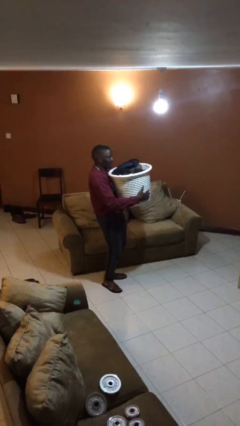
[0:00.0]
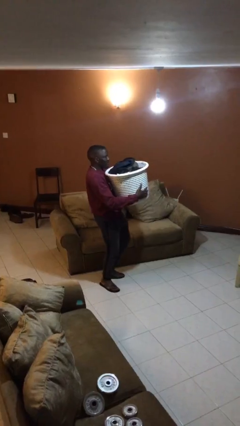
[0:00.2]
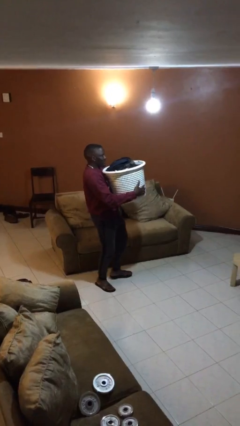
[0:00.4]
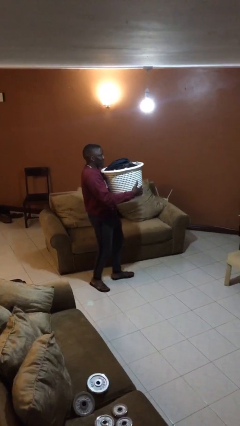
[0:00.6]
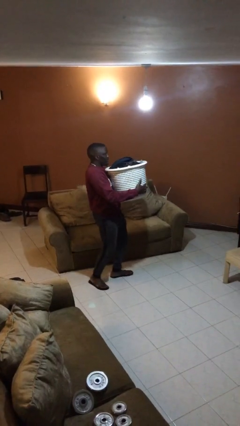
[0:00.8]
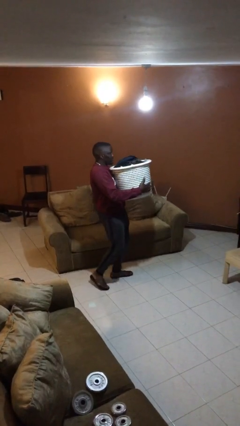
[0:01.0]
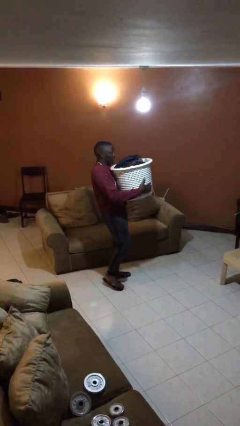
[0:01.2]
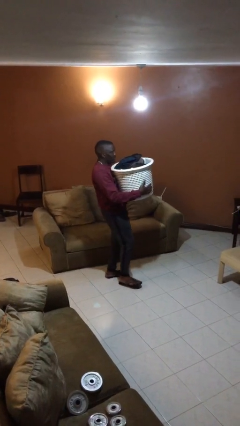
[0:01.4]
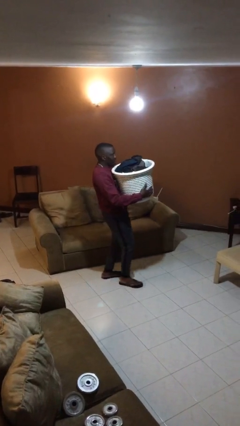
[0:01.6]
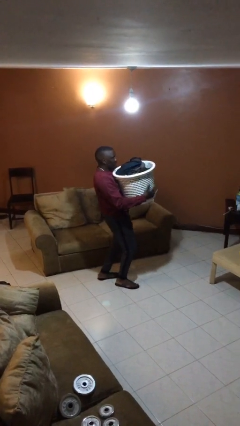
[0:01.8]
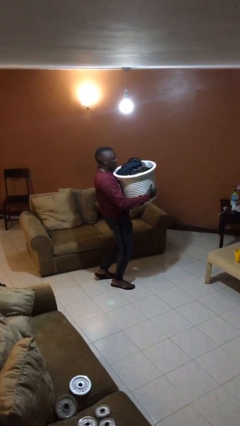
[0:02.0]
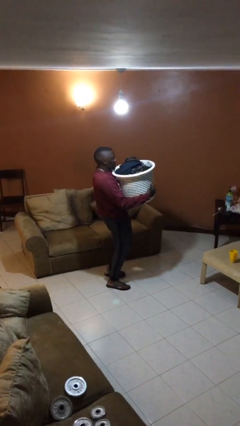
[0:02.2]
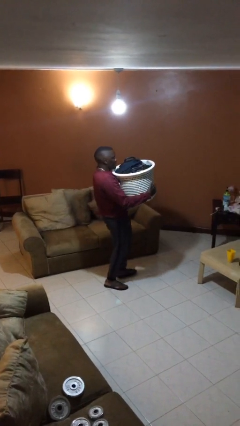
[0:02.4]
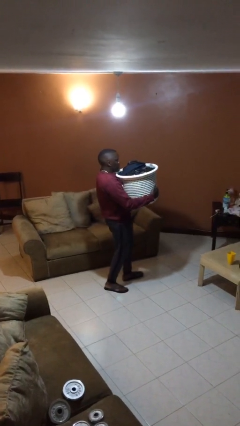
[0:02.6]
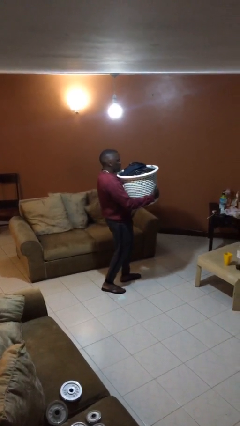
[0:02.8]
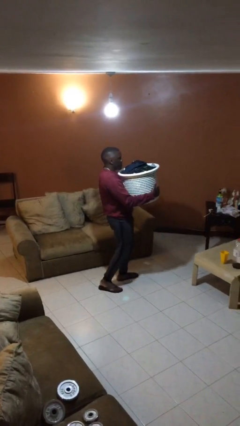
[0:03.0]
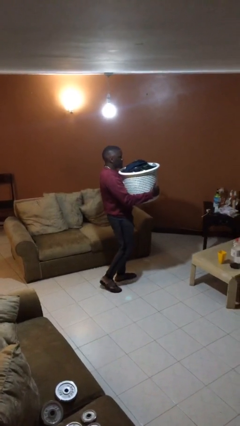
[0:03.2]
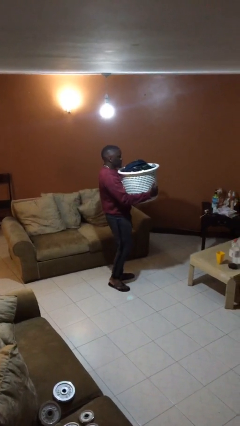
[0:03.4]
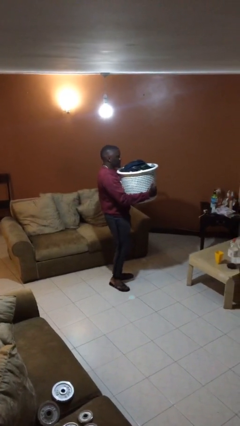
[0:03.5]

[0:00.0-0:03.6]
person carries laundry basket

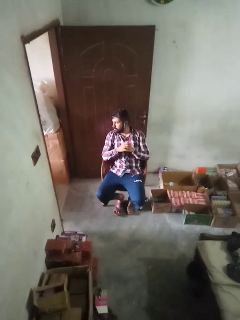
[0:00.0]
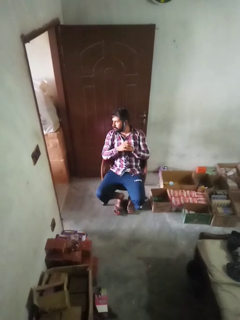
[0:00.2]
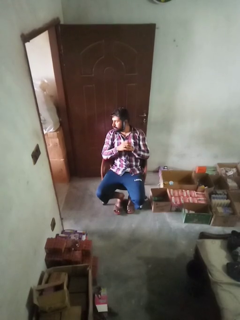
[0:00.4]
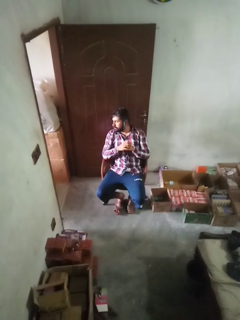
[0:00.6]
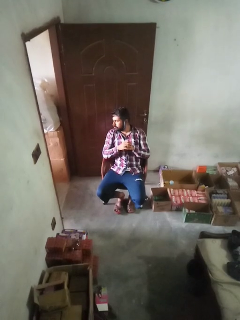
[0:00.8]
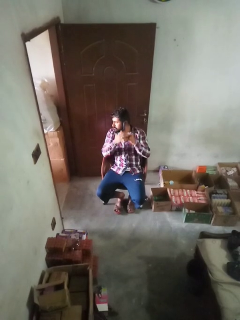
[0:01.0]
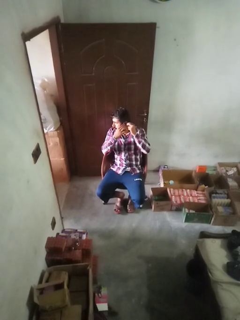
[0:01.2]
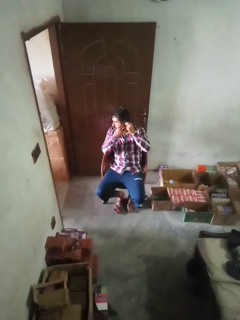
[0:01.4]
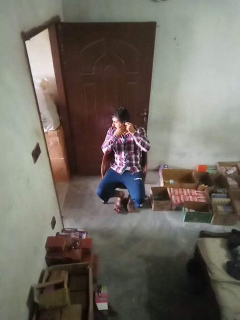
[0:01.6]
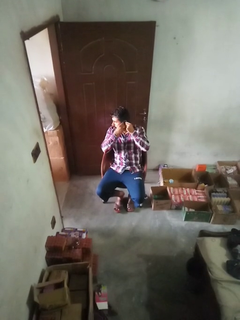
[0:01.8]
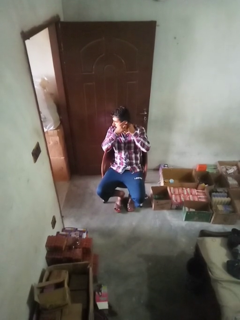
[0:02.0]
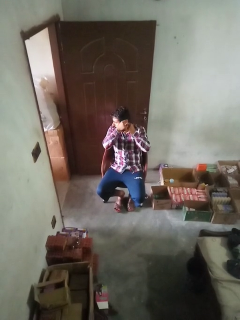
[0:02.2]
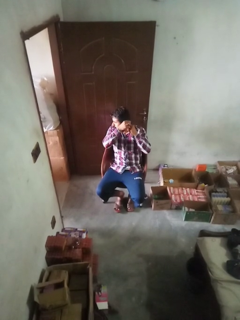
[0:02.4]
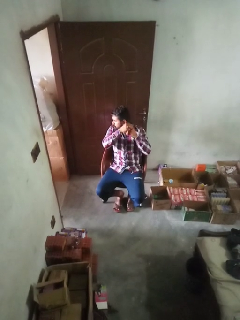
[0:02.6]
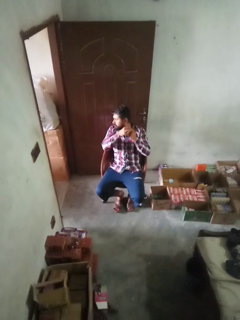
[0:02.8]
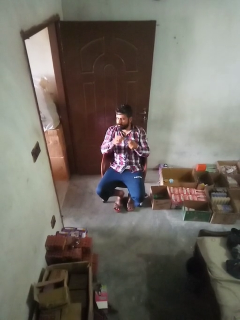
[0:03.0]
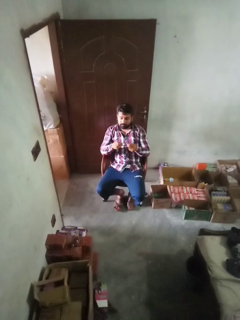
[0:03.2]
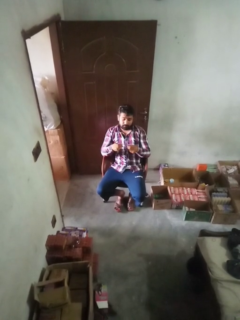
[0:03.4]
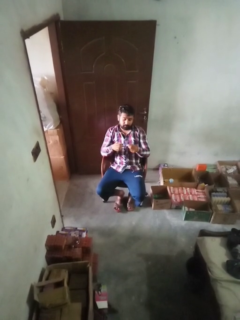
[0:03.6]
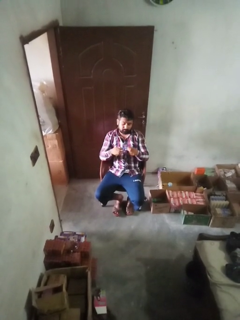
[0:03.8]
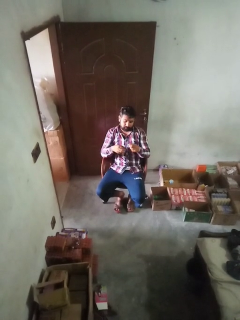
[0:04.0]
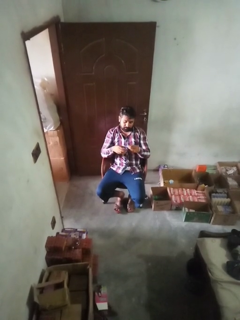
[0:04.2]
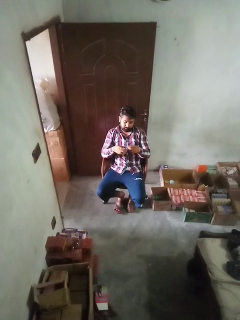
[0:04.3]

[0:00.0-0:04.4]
person takes off earrings

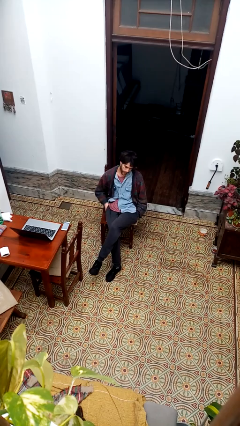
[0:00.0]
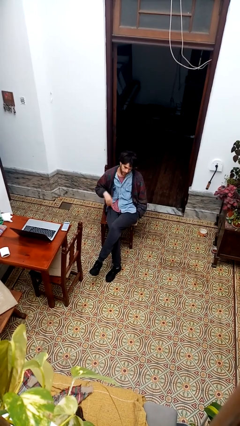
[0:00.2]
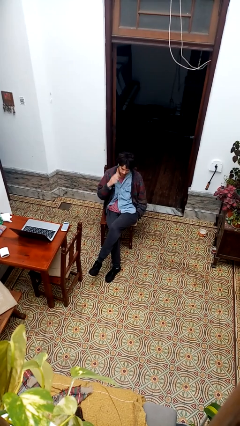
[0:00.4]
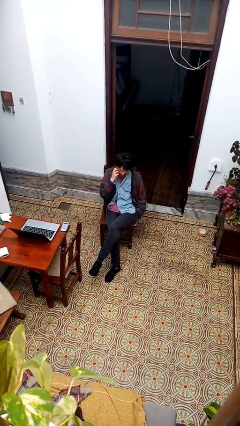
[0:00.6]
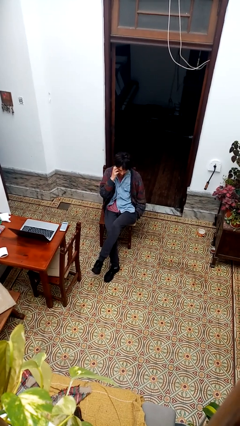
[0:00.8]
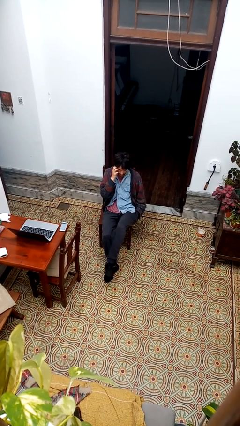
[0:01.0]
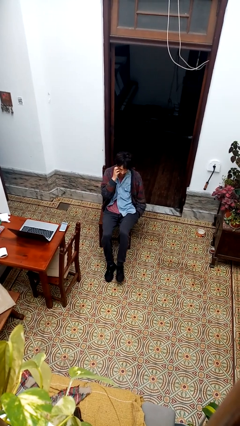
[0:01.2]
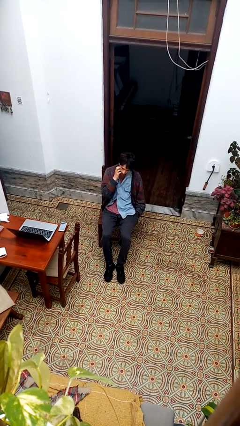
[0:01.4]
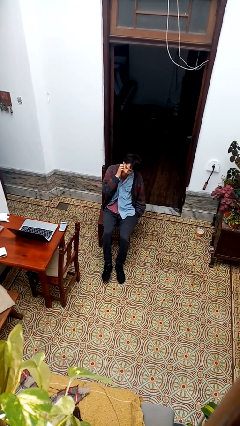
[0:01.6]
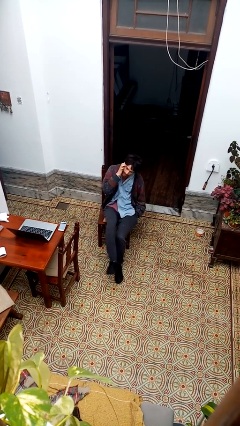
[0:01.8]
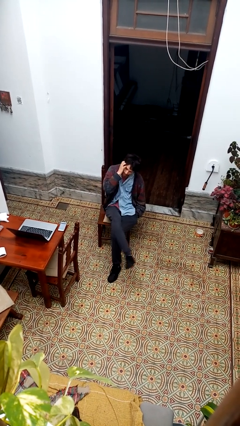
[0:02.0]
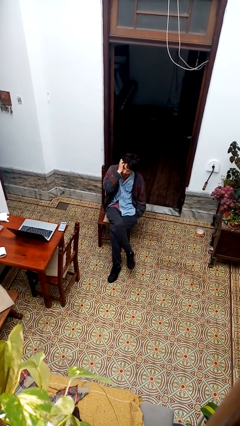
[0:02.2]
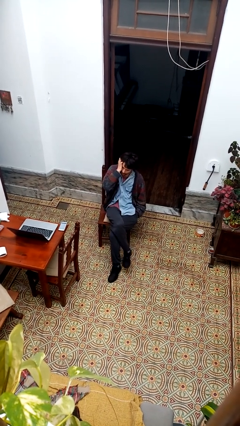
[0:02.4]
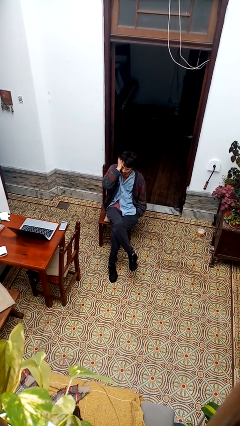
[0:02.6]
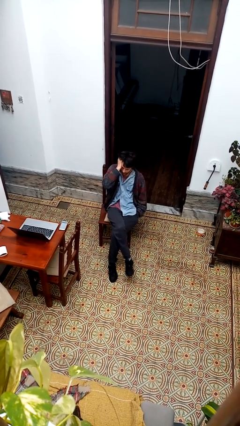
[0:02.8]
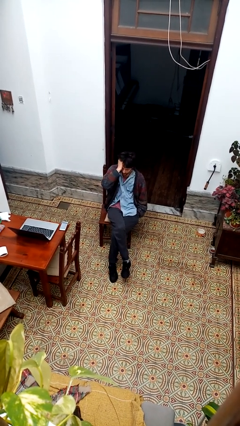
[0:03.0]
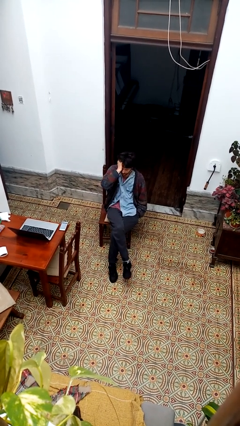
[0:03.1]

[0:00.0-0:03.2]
person crosses legs

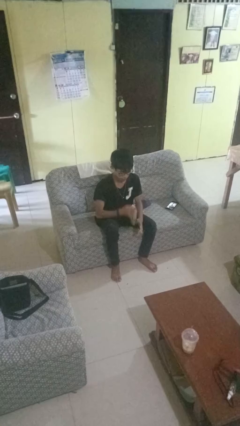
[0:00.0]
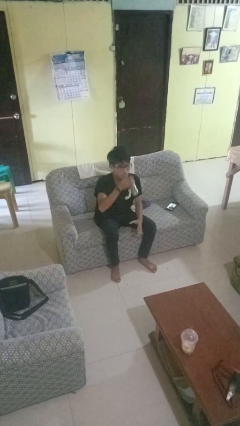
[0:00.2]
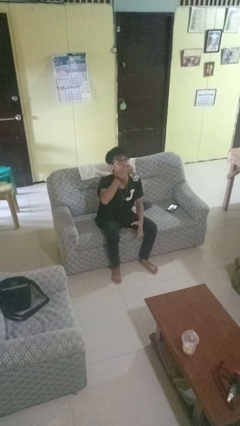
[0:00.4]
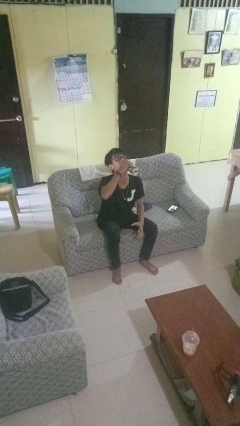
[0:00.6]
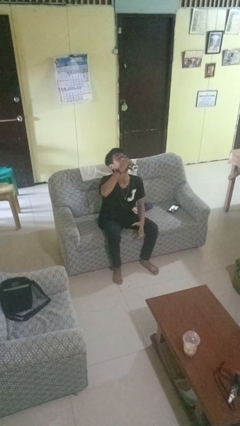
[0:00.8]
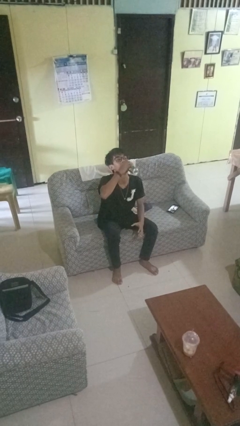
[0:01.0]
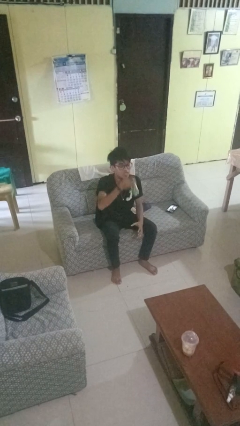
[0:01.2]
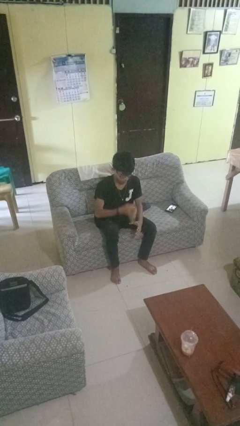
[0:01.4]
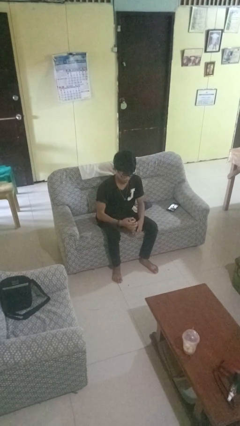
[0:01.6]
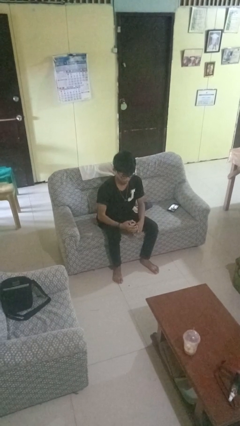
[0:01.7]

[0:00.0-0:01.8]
person drinks from beverage can

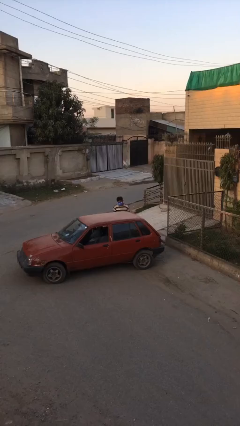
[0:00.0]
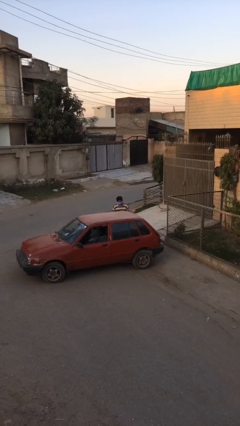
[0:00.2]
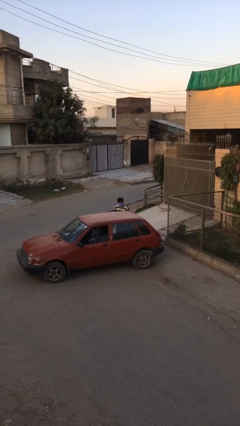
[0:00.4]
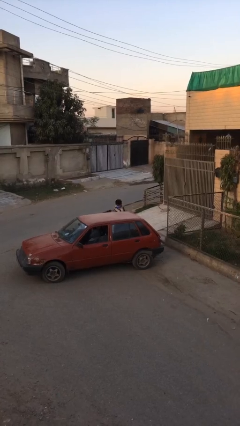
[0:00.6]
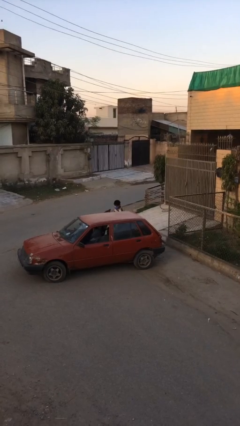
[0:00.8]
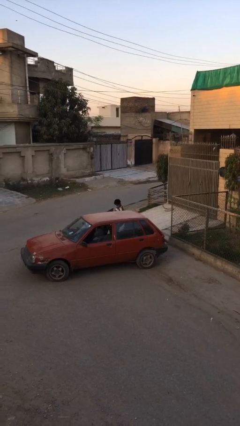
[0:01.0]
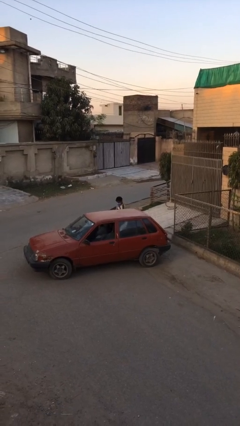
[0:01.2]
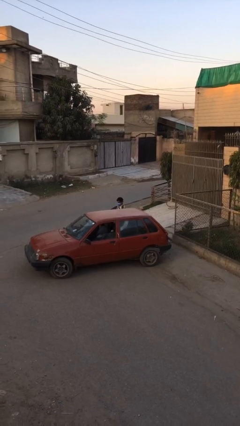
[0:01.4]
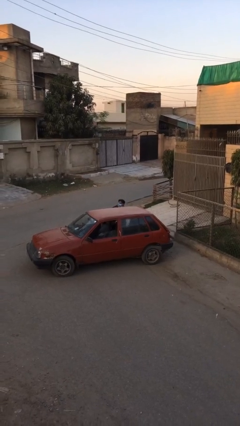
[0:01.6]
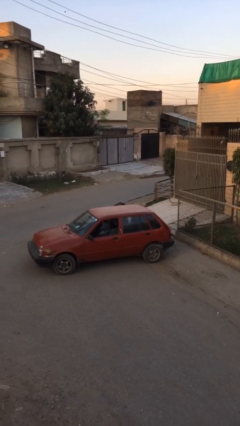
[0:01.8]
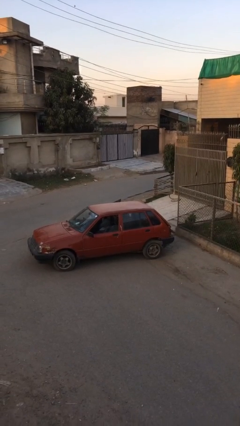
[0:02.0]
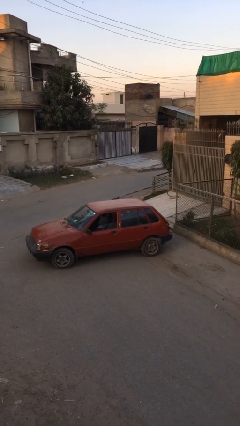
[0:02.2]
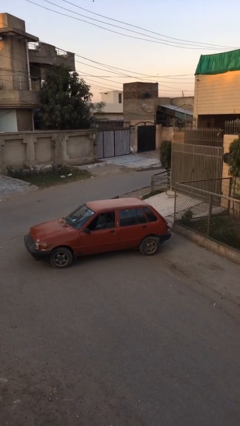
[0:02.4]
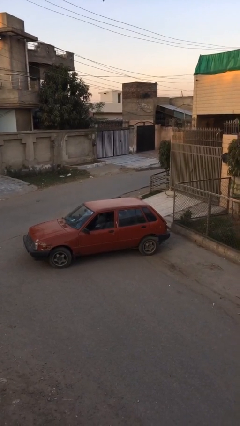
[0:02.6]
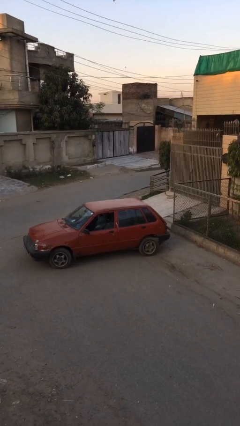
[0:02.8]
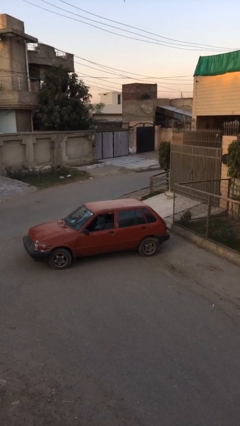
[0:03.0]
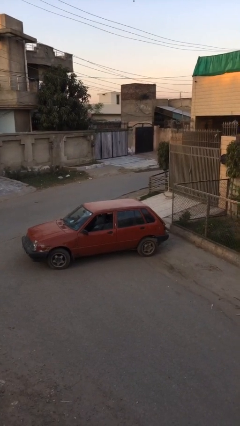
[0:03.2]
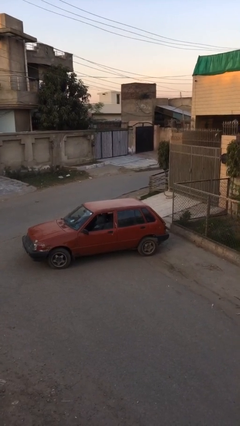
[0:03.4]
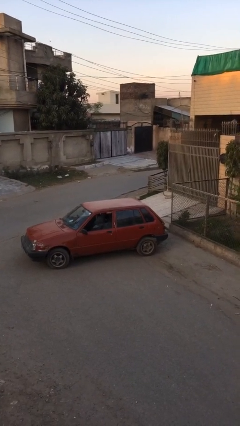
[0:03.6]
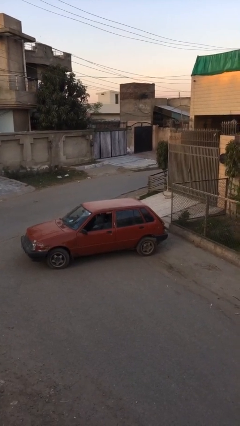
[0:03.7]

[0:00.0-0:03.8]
person enters car

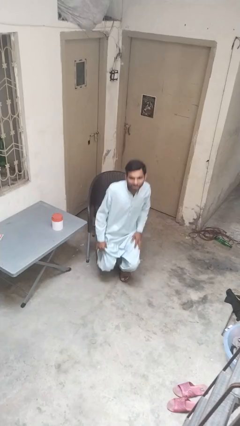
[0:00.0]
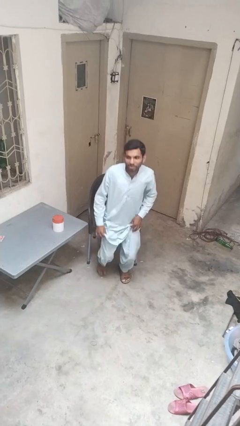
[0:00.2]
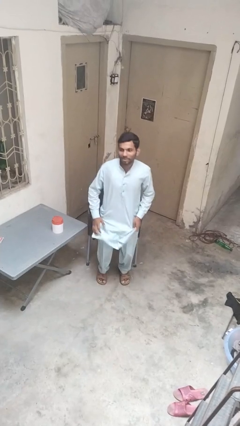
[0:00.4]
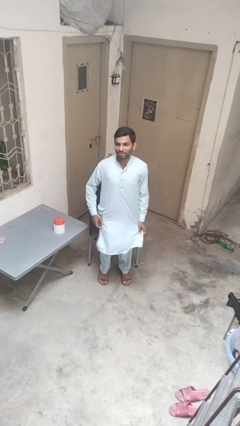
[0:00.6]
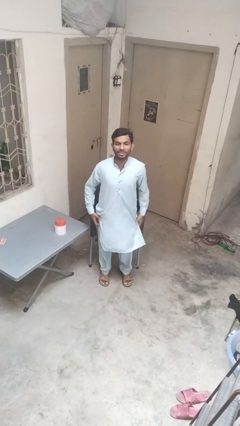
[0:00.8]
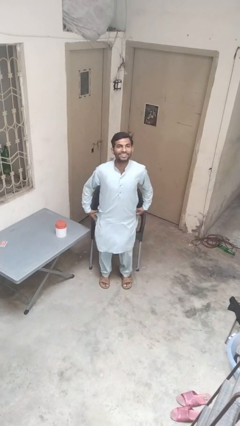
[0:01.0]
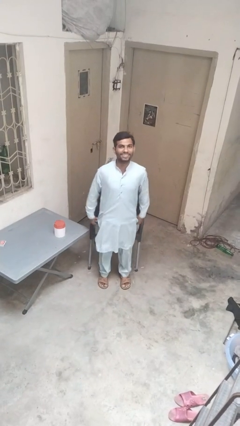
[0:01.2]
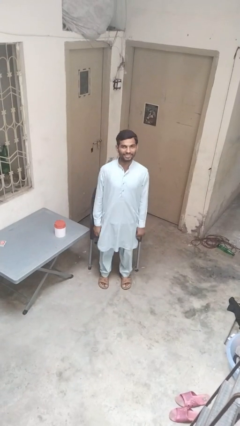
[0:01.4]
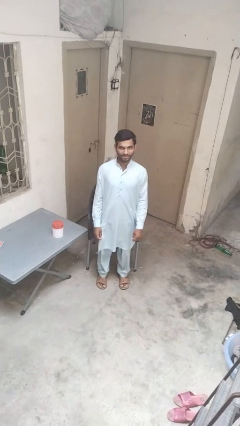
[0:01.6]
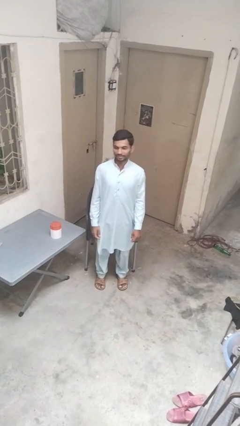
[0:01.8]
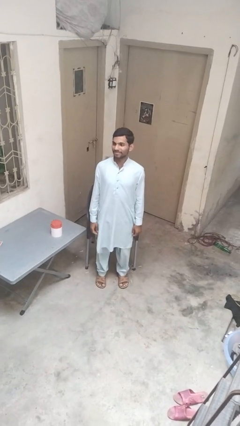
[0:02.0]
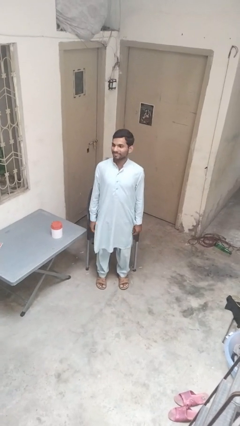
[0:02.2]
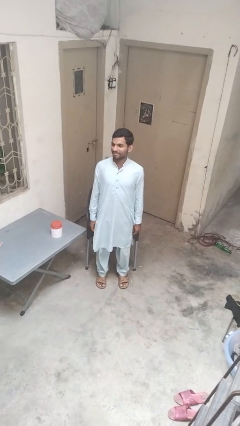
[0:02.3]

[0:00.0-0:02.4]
person stands up from floor
